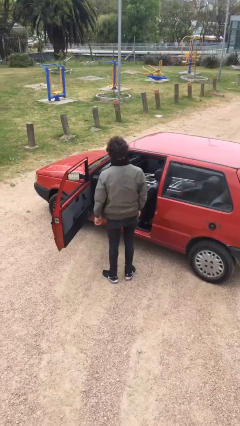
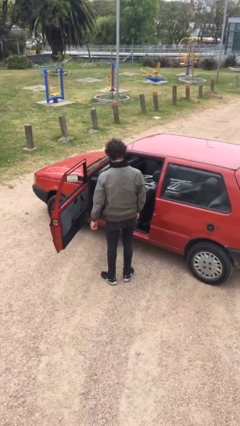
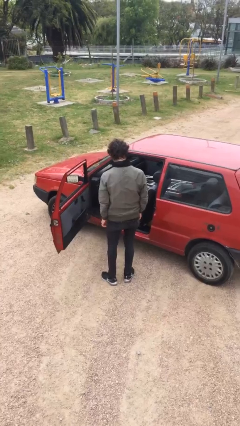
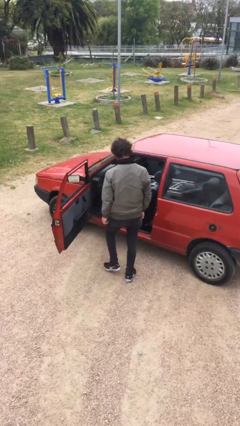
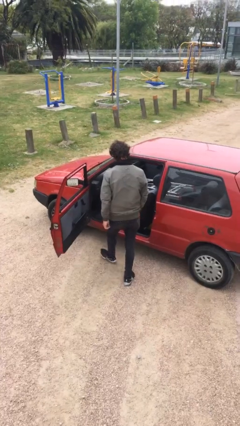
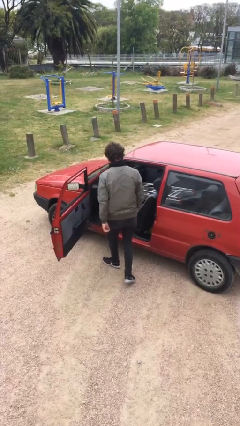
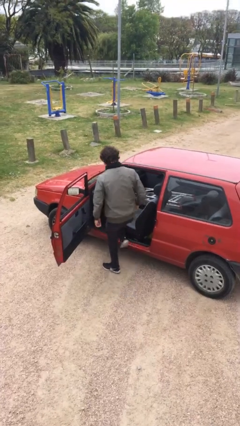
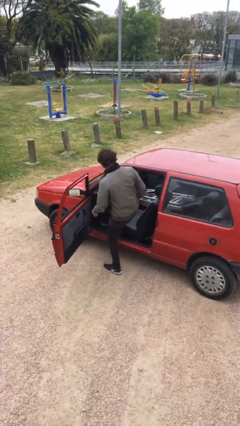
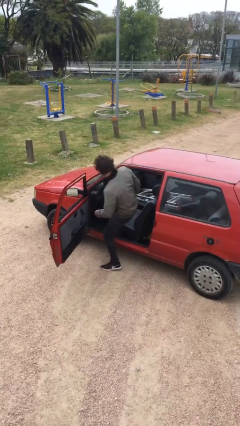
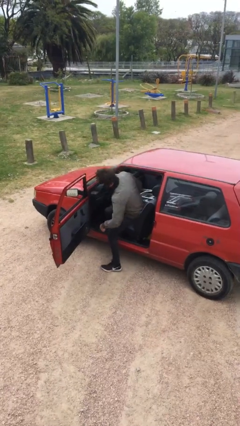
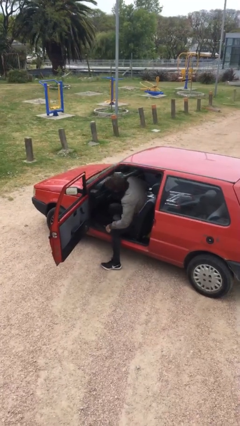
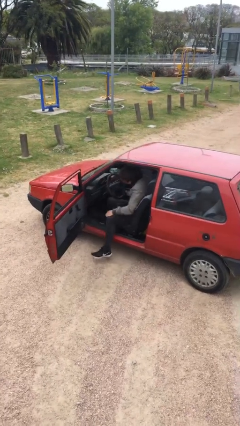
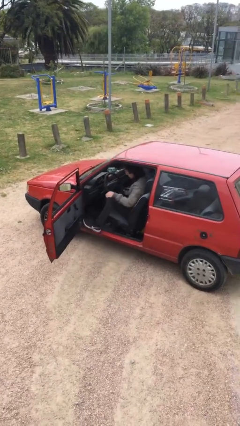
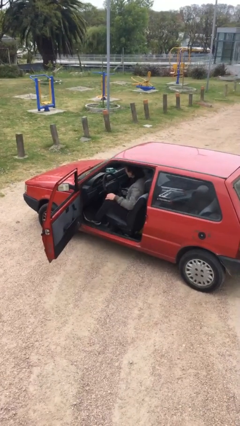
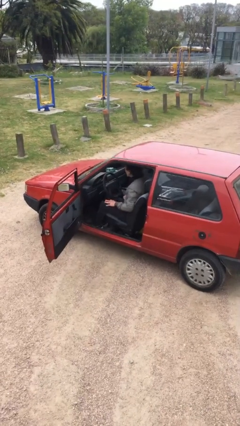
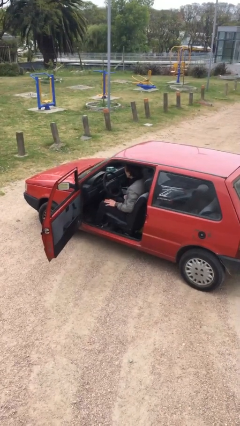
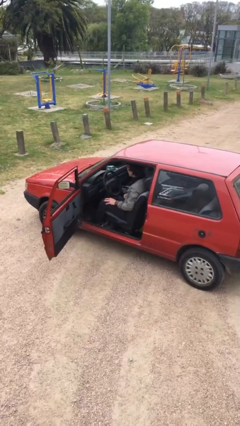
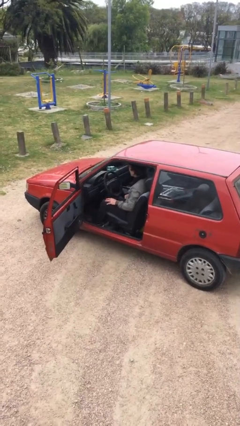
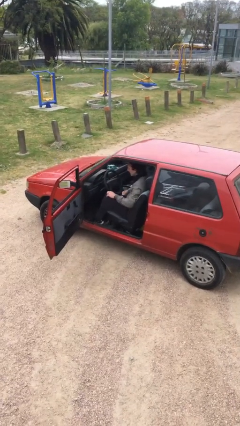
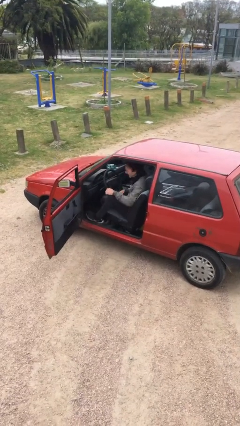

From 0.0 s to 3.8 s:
person enters car

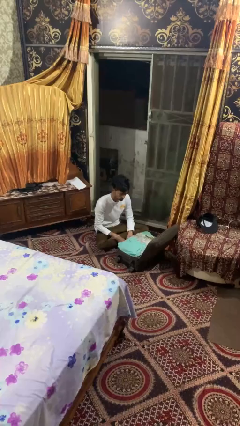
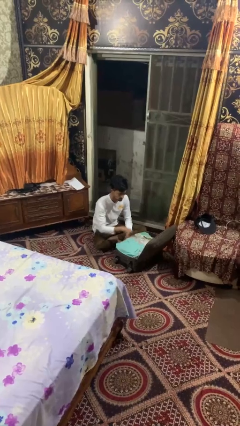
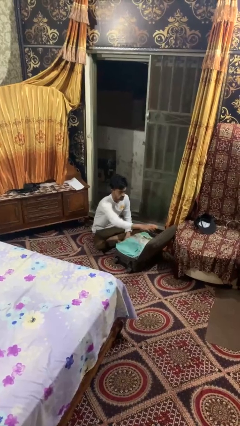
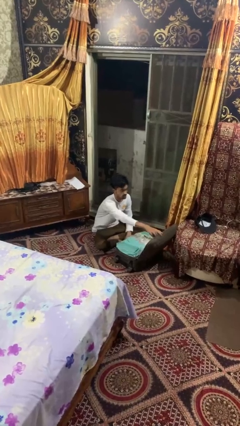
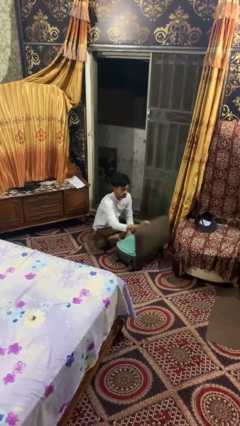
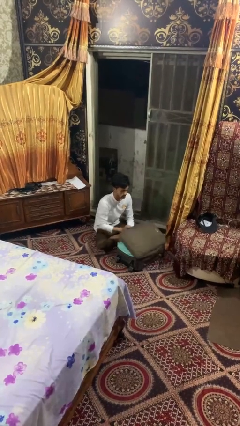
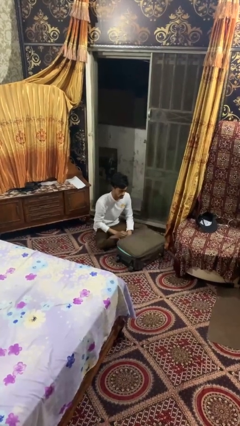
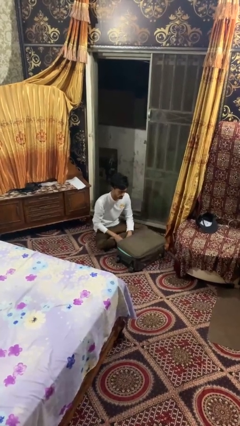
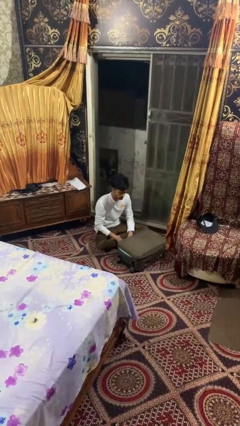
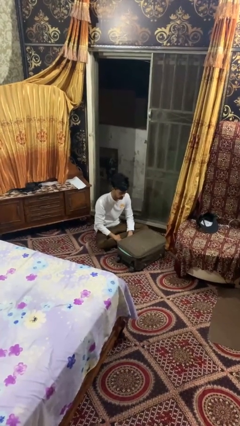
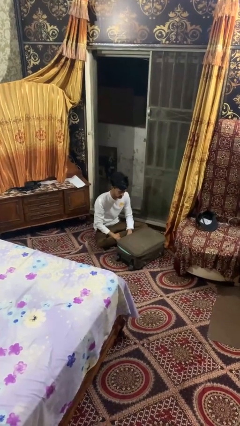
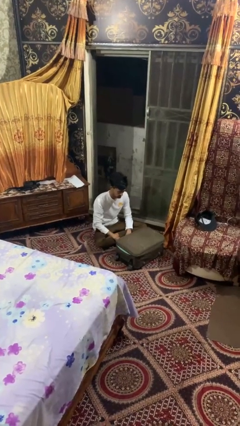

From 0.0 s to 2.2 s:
person closes suitcase

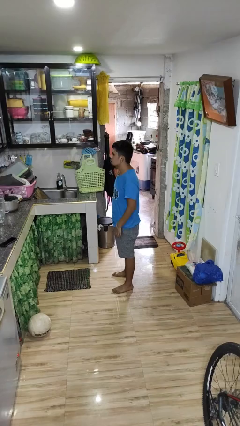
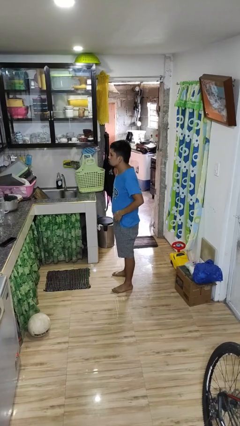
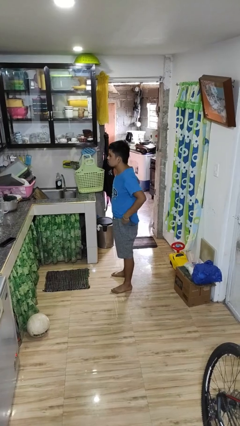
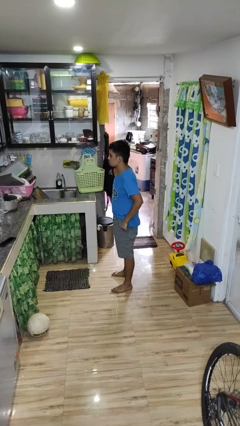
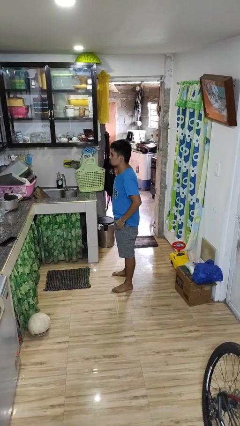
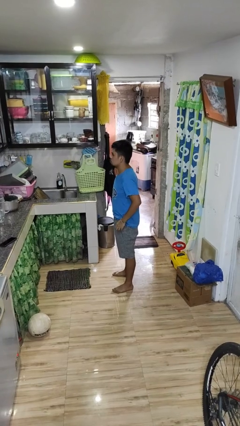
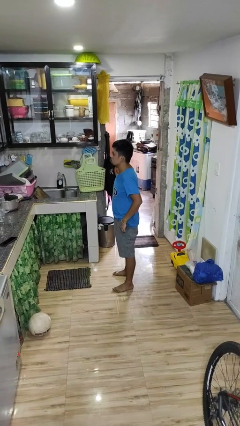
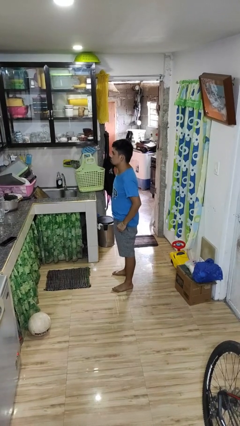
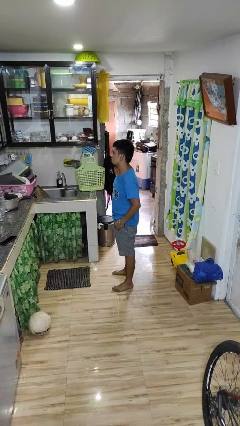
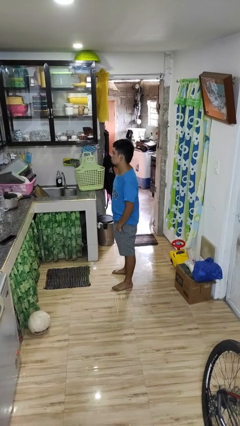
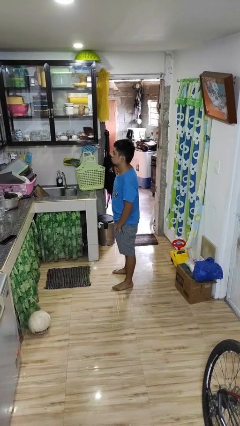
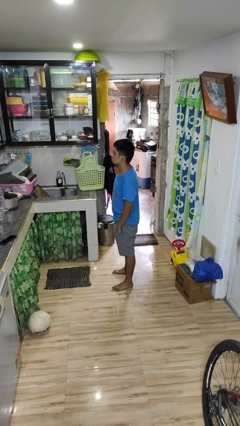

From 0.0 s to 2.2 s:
person puts hands in back pockets

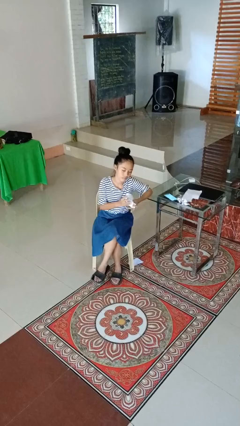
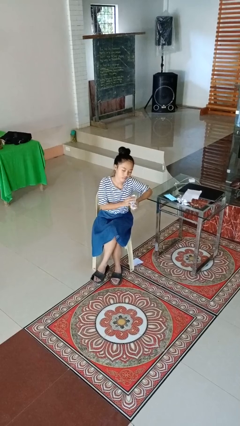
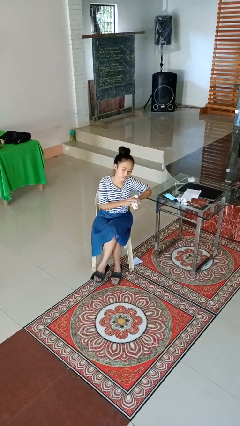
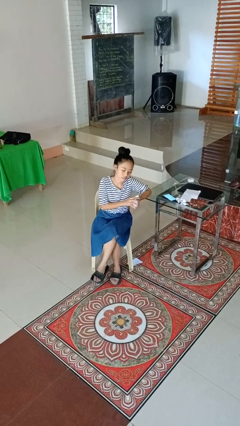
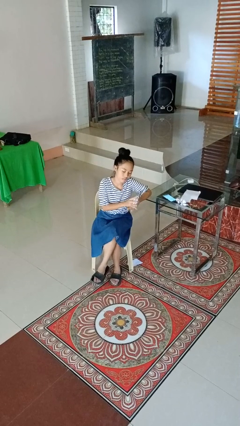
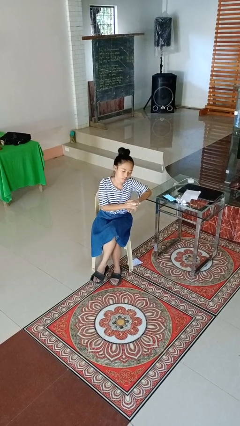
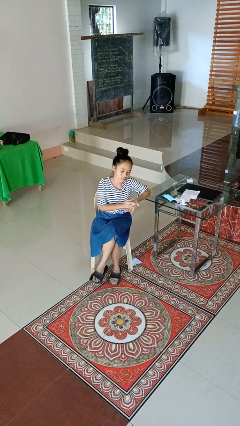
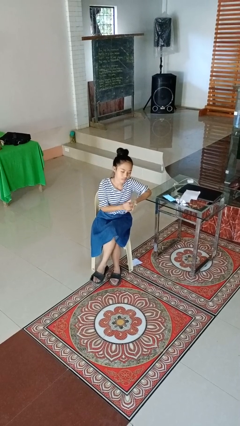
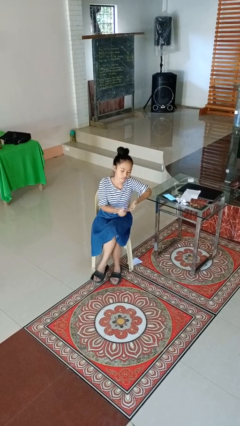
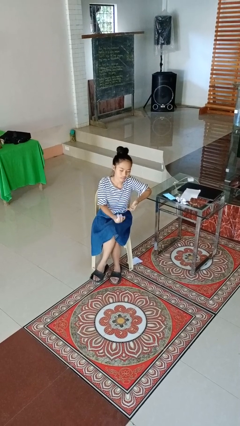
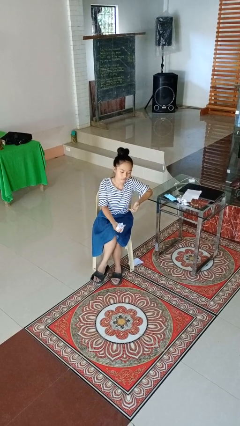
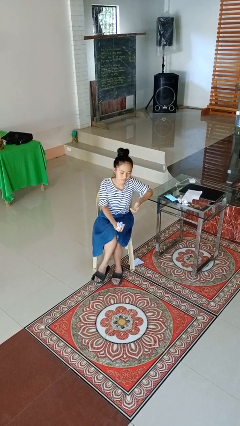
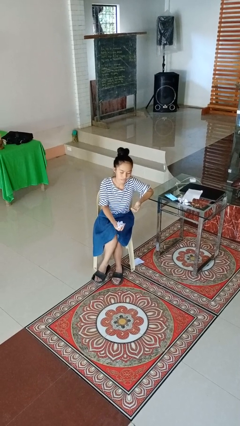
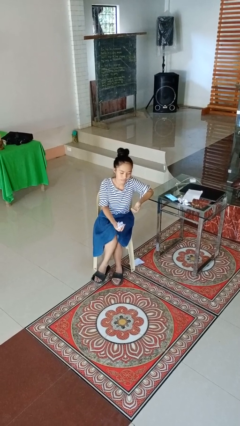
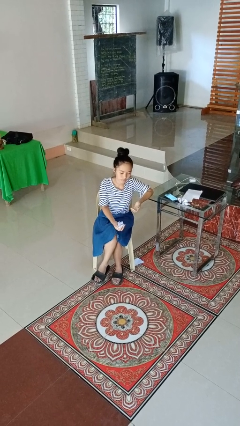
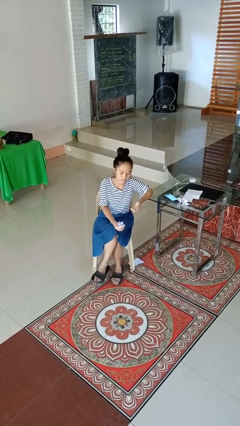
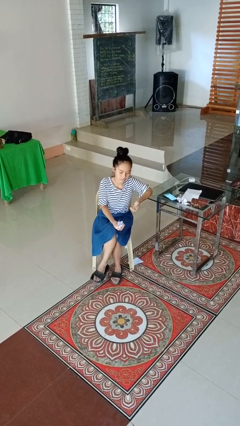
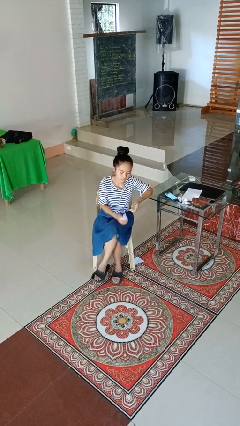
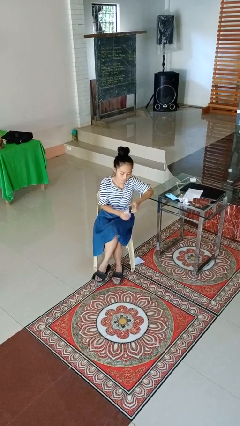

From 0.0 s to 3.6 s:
person crumples paper

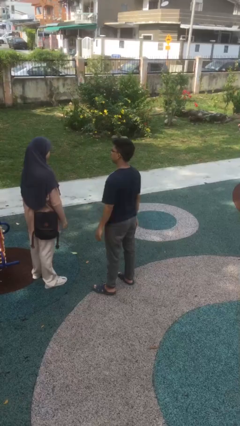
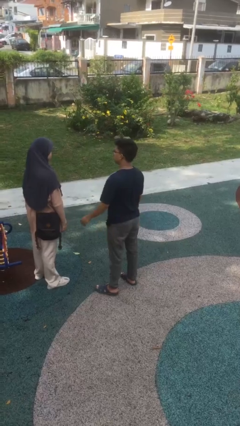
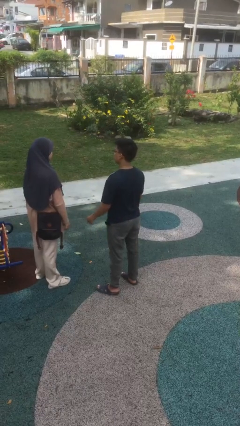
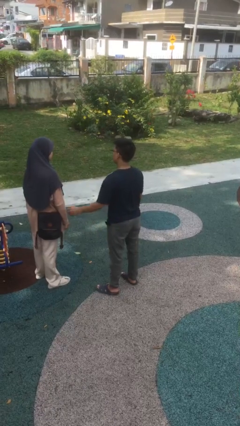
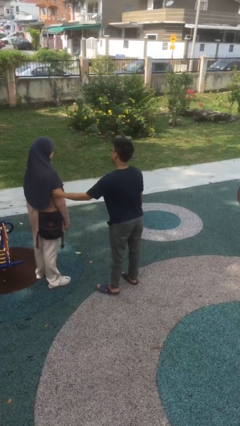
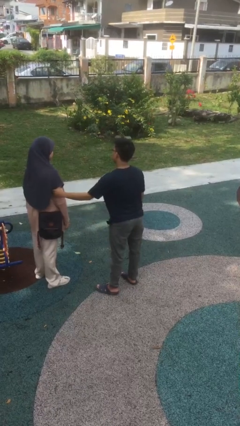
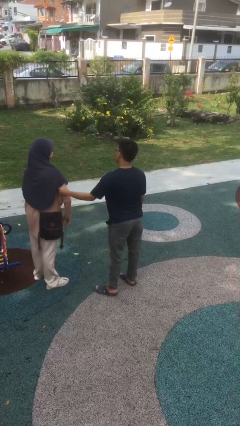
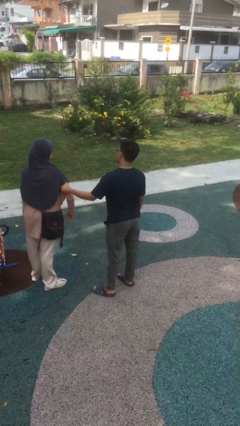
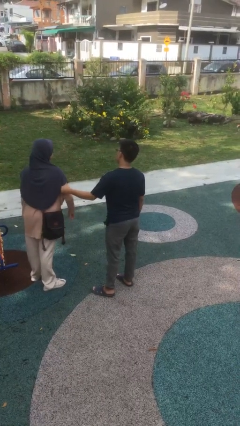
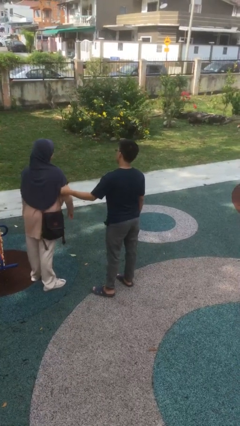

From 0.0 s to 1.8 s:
person grabs person by bicep

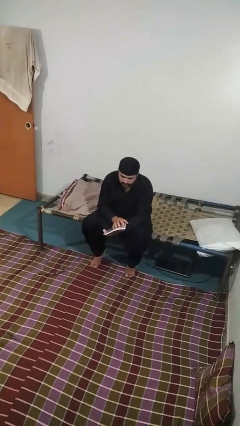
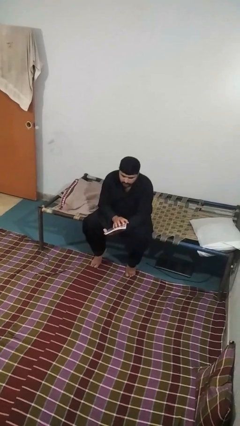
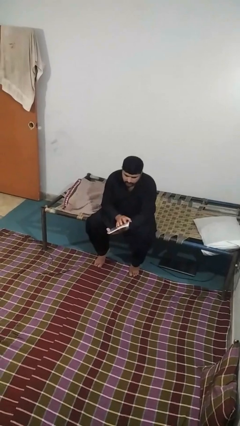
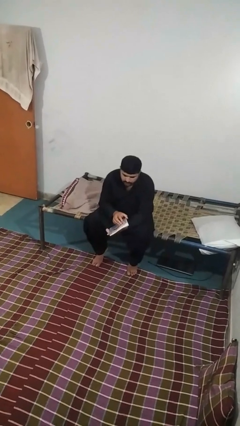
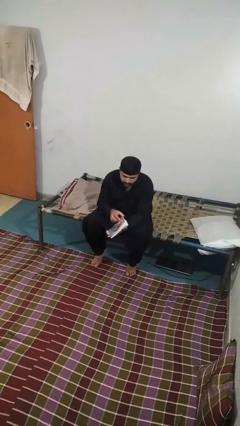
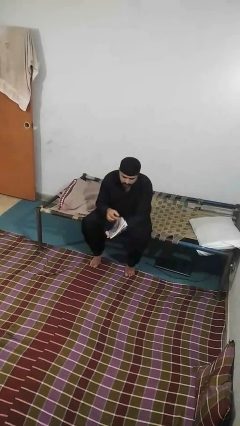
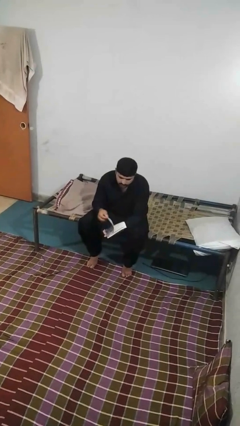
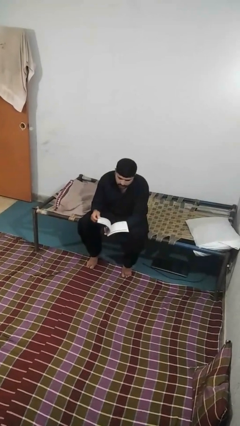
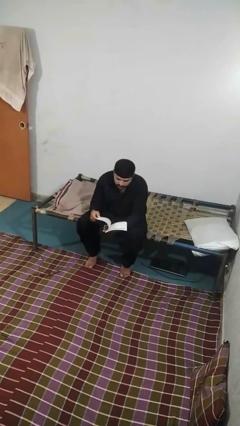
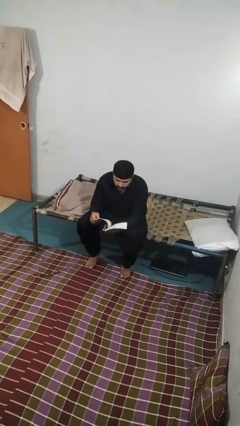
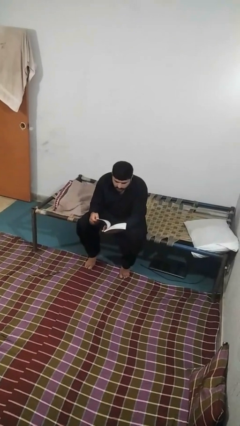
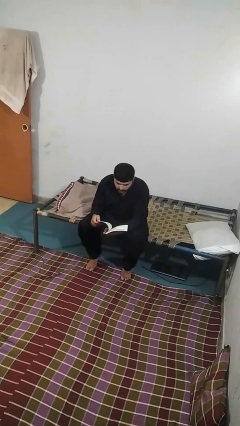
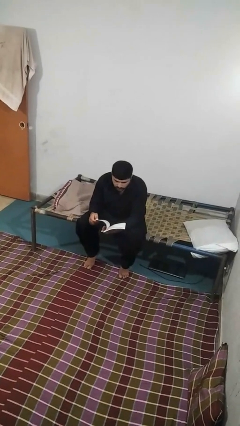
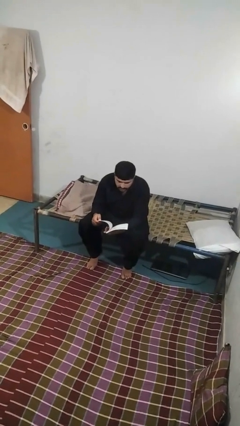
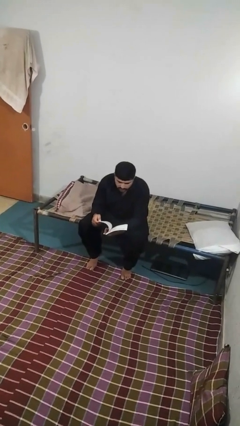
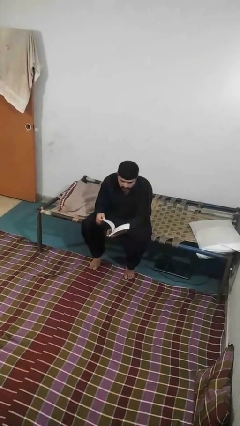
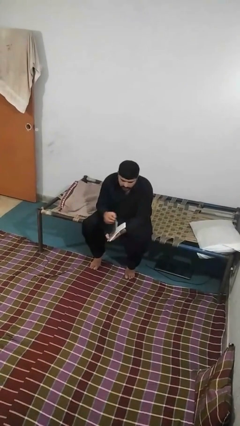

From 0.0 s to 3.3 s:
person reads book

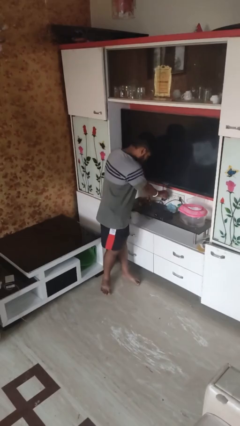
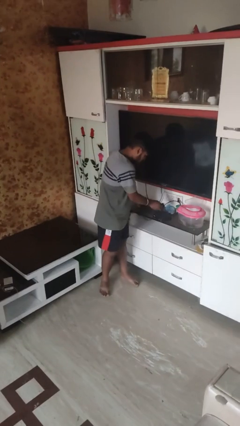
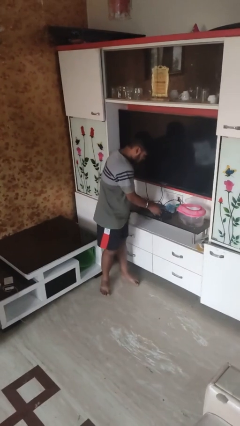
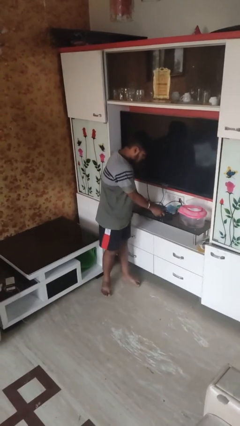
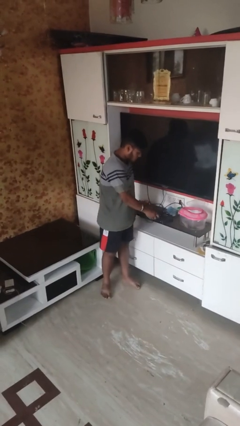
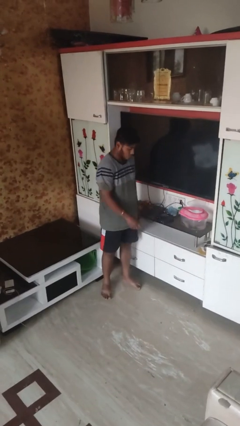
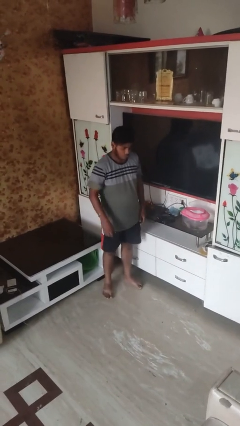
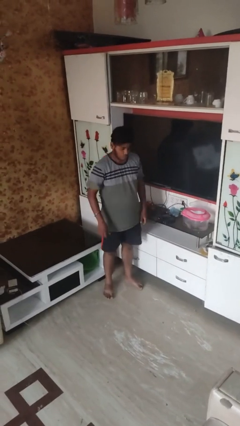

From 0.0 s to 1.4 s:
person unplugs from electrical socket
